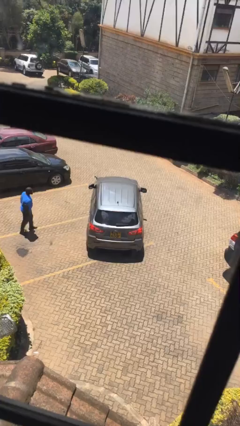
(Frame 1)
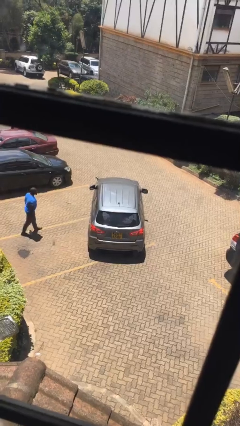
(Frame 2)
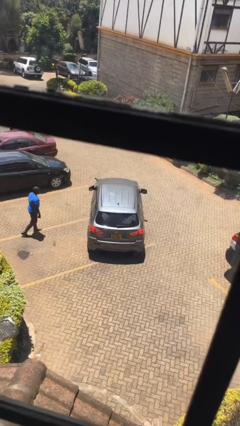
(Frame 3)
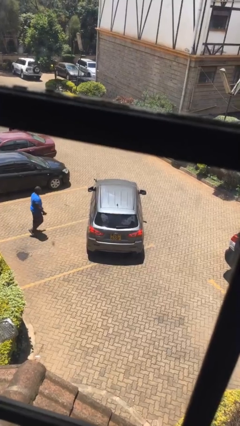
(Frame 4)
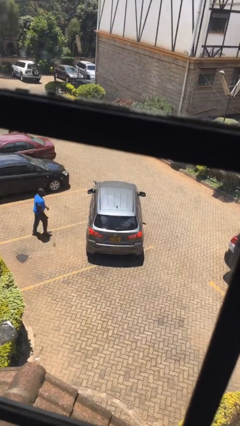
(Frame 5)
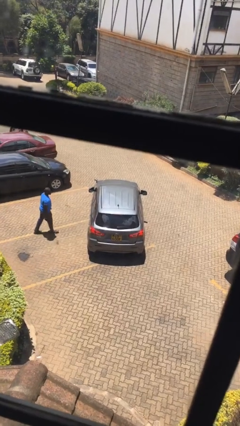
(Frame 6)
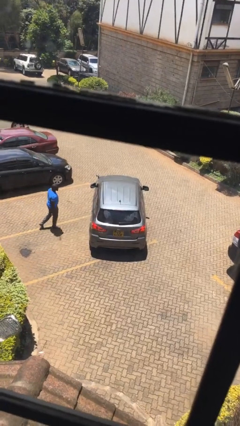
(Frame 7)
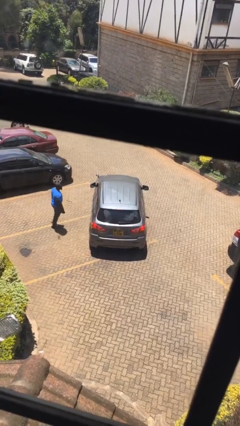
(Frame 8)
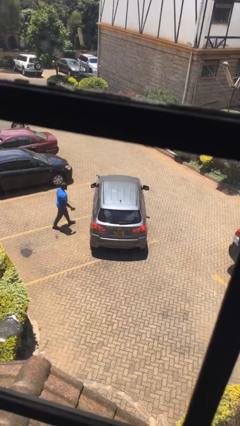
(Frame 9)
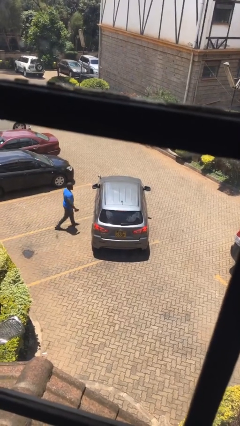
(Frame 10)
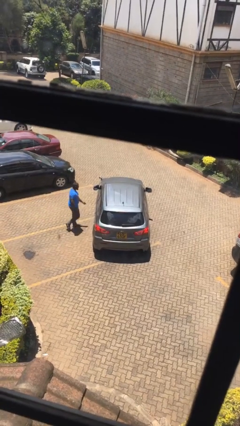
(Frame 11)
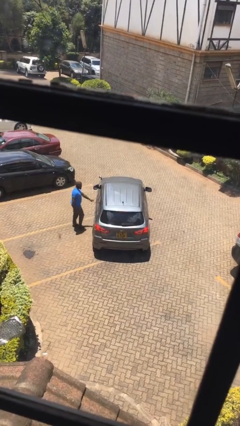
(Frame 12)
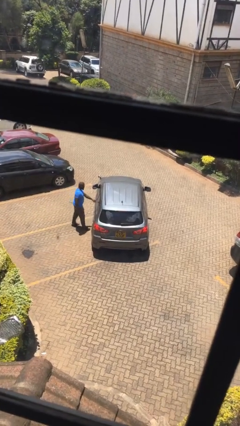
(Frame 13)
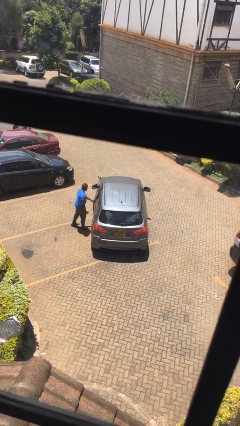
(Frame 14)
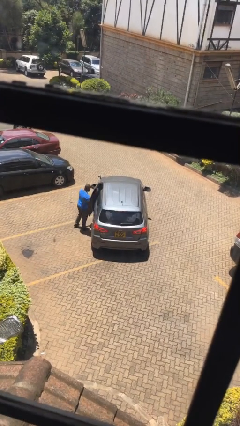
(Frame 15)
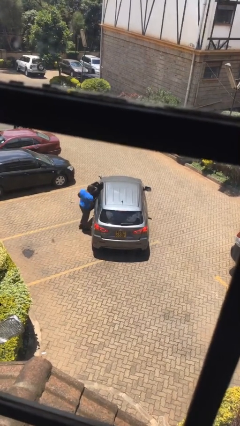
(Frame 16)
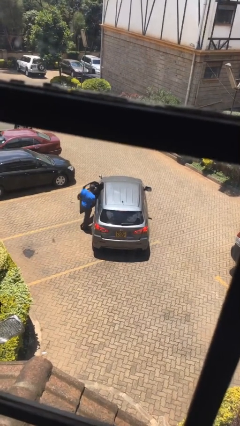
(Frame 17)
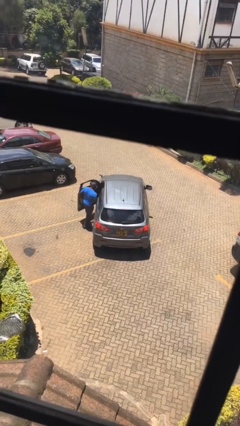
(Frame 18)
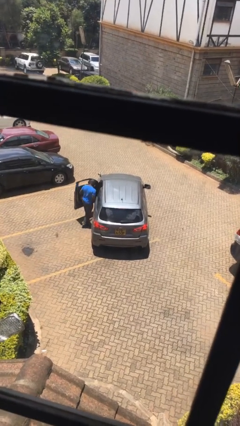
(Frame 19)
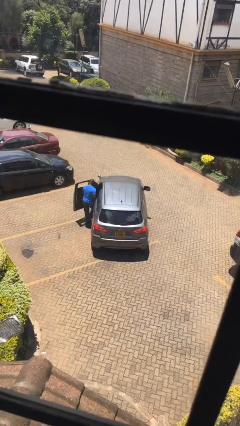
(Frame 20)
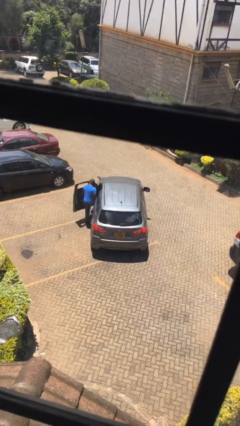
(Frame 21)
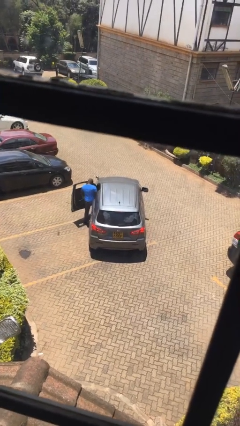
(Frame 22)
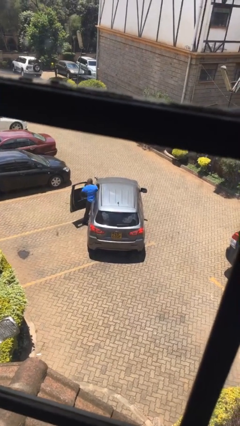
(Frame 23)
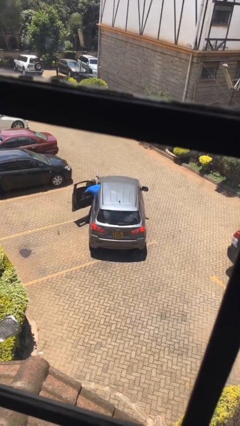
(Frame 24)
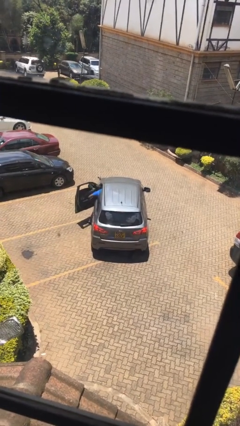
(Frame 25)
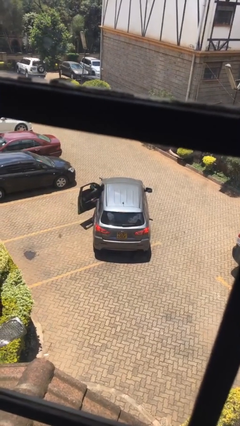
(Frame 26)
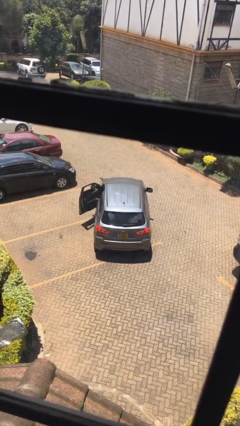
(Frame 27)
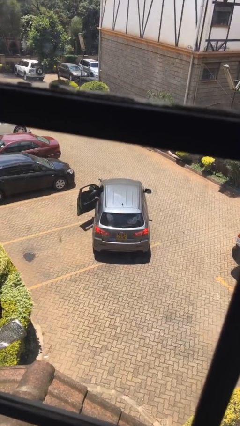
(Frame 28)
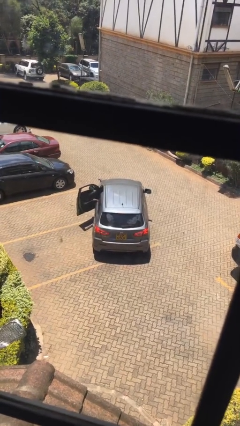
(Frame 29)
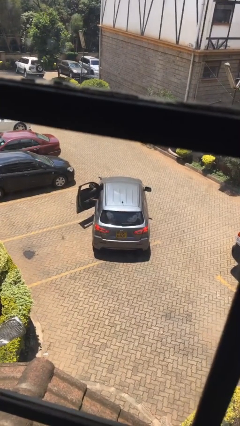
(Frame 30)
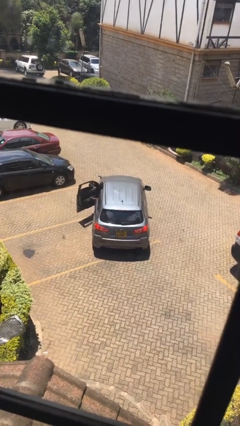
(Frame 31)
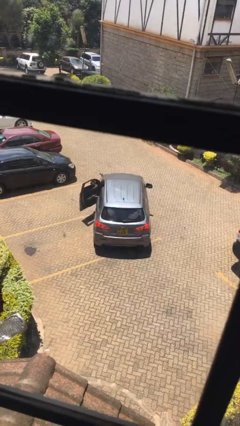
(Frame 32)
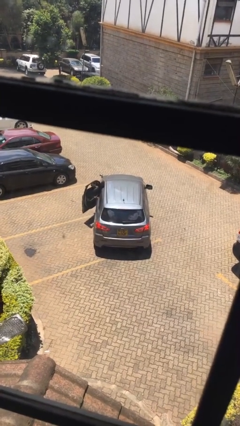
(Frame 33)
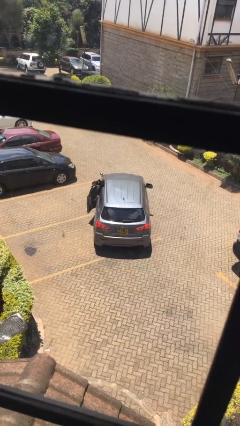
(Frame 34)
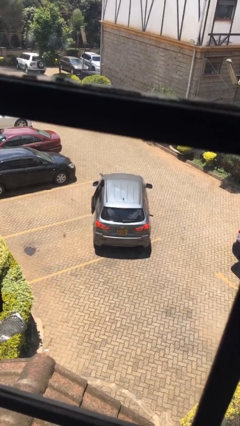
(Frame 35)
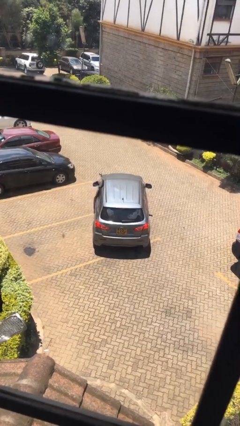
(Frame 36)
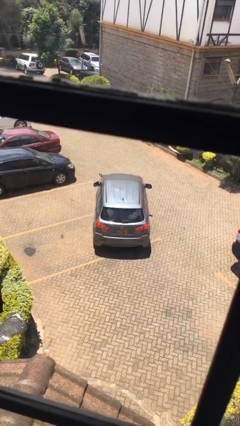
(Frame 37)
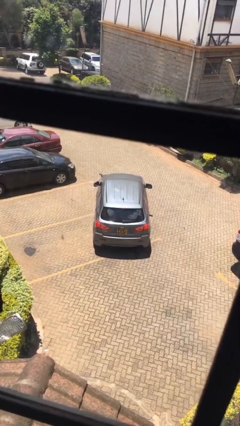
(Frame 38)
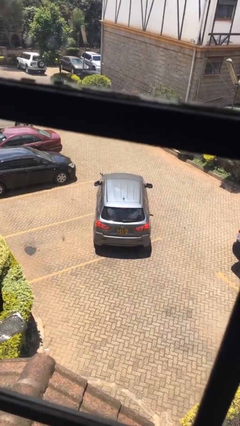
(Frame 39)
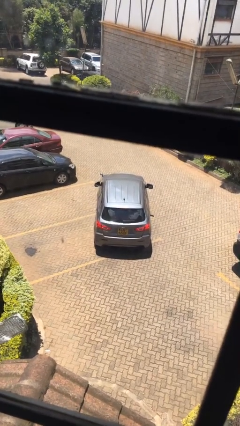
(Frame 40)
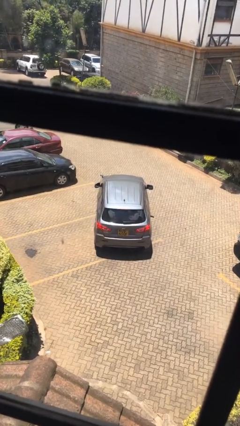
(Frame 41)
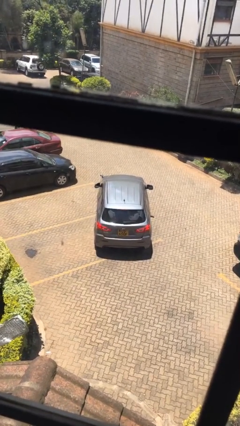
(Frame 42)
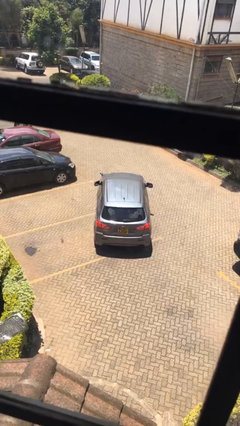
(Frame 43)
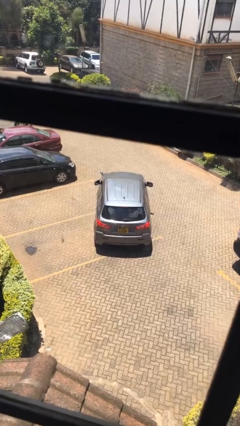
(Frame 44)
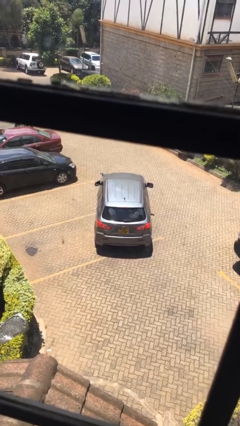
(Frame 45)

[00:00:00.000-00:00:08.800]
car picks up person

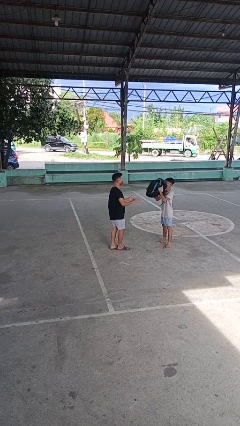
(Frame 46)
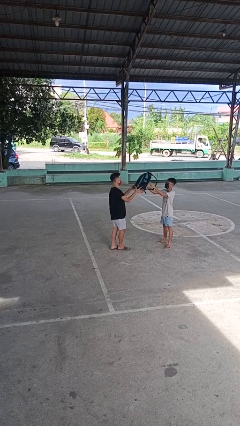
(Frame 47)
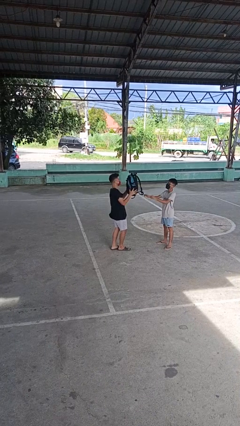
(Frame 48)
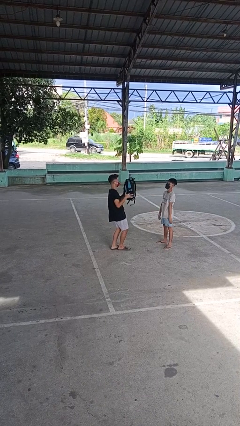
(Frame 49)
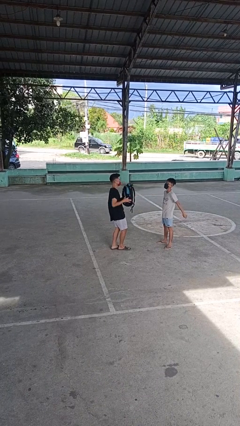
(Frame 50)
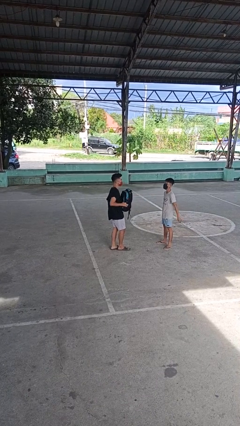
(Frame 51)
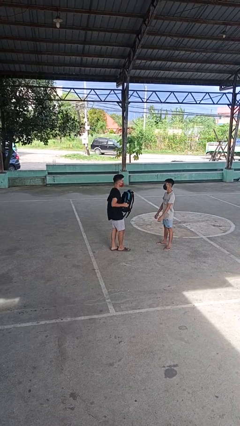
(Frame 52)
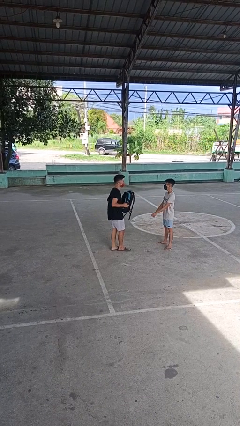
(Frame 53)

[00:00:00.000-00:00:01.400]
person catches object from person

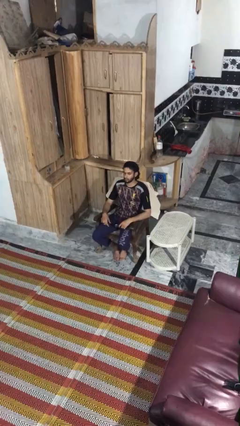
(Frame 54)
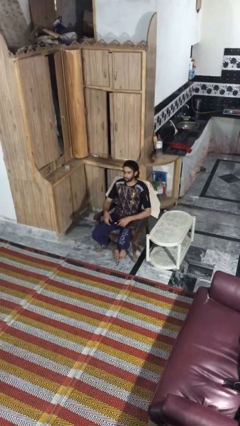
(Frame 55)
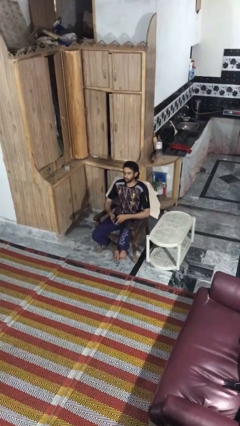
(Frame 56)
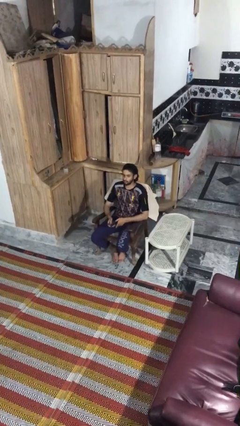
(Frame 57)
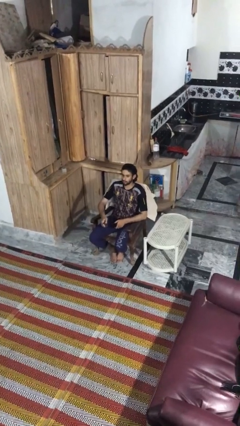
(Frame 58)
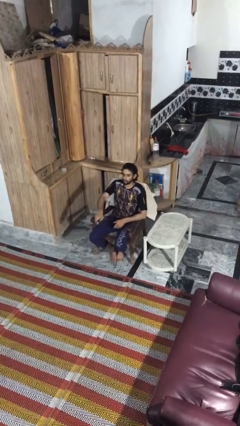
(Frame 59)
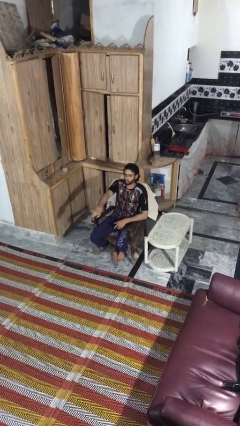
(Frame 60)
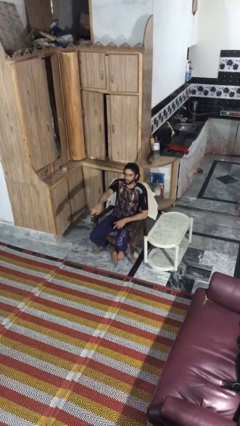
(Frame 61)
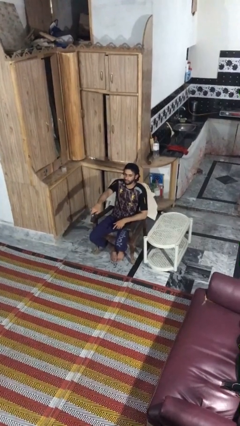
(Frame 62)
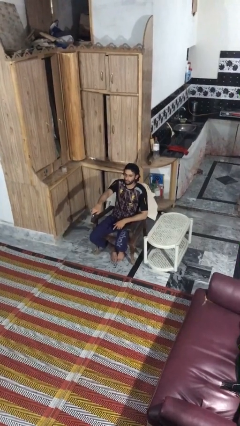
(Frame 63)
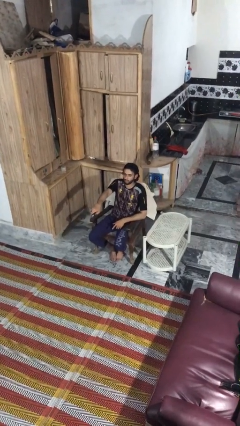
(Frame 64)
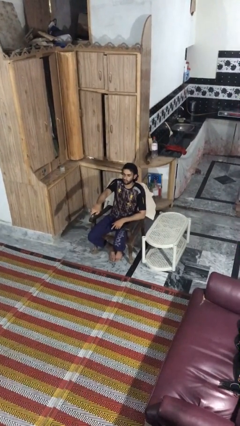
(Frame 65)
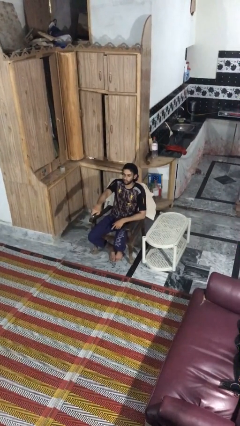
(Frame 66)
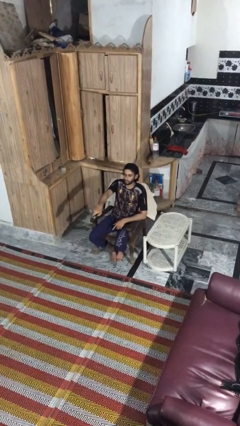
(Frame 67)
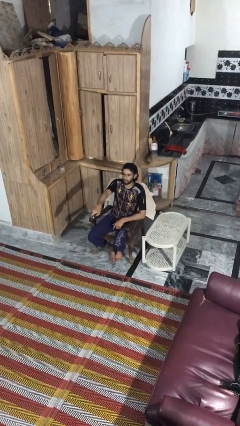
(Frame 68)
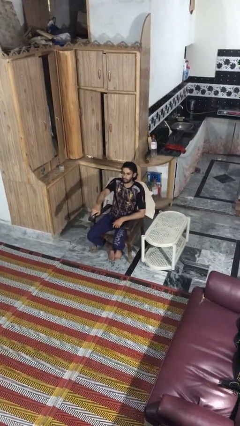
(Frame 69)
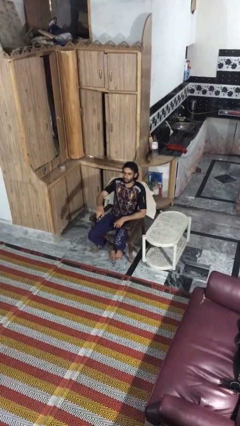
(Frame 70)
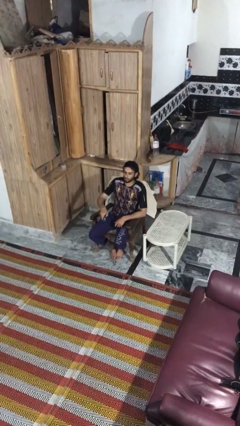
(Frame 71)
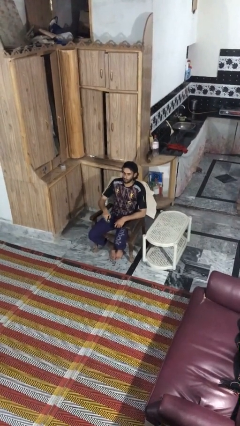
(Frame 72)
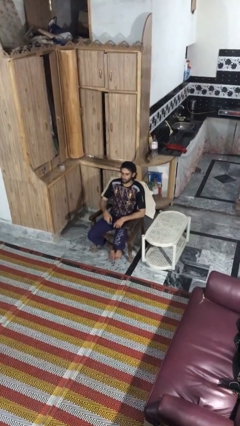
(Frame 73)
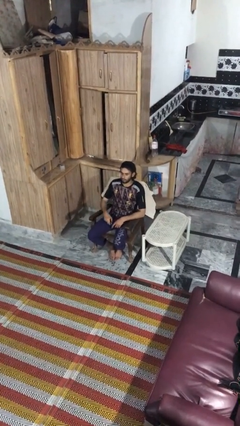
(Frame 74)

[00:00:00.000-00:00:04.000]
person uses television remote

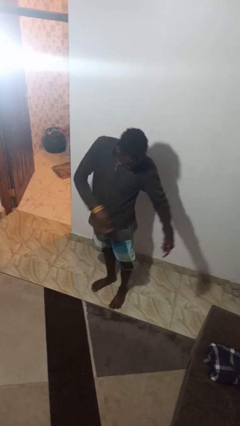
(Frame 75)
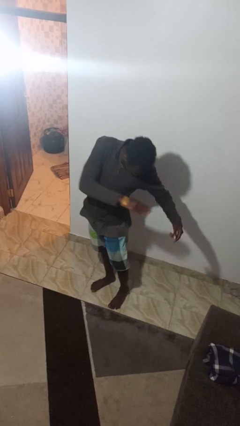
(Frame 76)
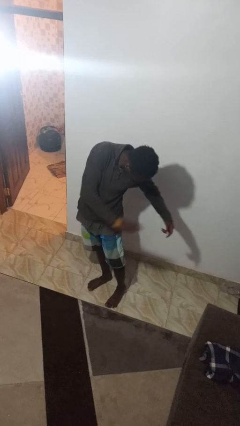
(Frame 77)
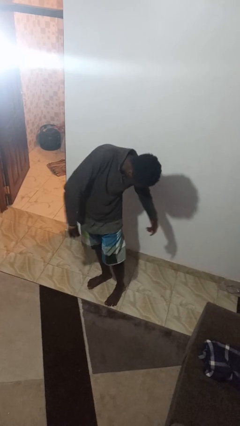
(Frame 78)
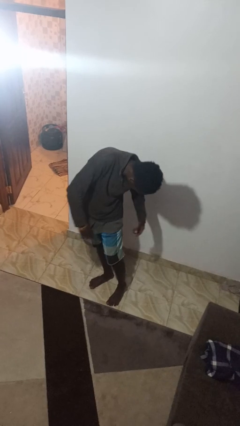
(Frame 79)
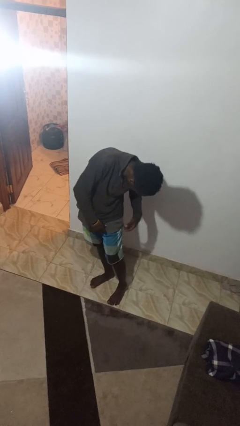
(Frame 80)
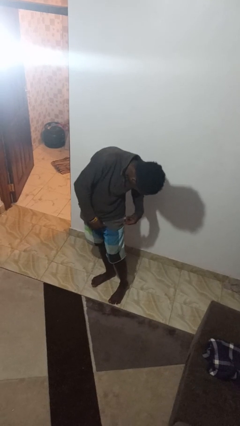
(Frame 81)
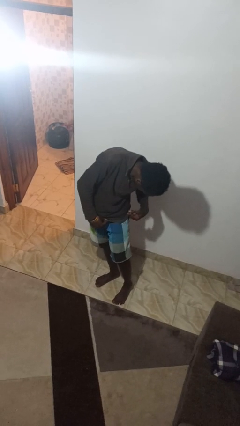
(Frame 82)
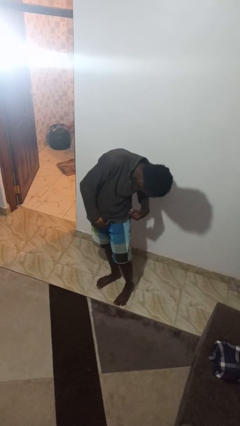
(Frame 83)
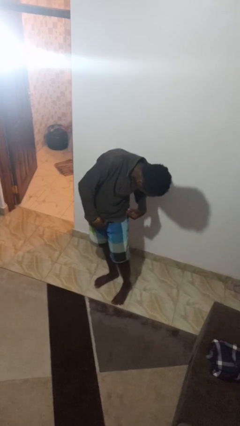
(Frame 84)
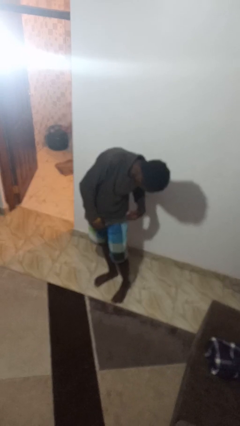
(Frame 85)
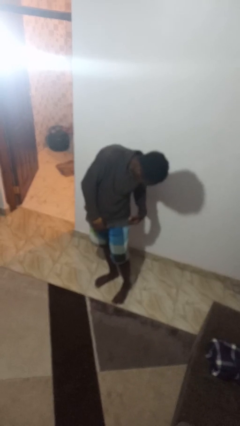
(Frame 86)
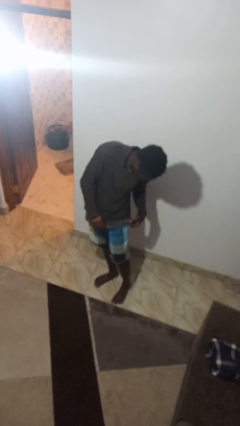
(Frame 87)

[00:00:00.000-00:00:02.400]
person swats bug

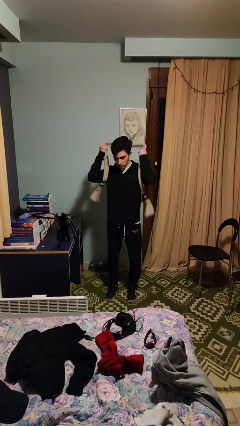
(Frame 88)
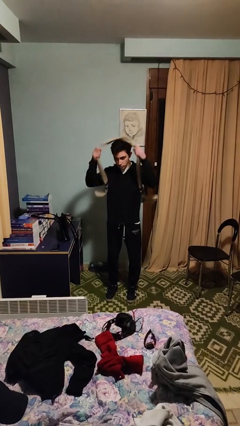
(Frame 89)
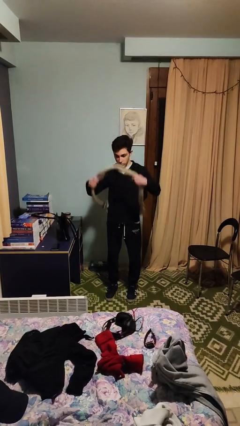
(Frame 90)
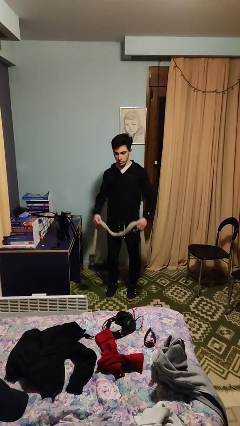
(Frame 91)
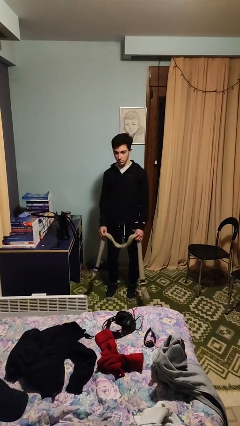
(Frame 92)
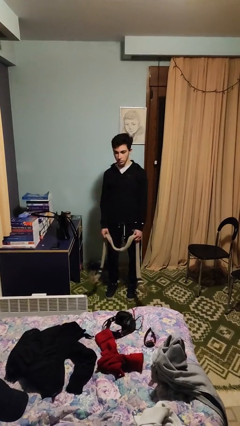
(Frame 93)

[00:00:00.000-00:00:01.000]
person takes off scarf
